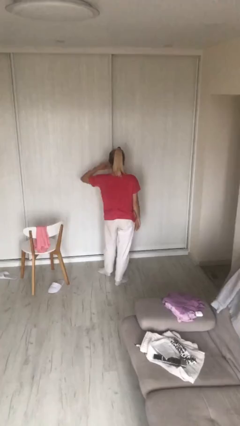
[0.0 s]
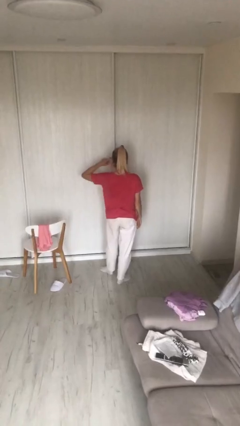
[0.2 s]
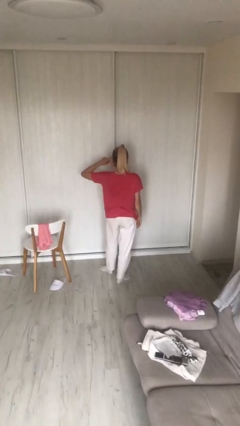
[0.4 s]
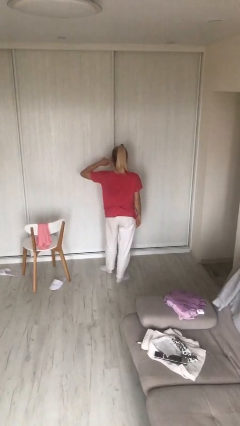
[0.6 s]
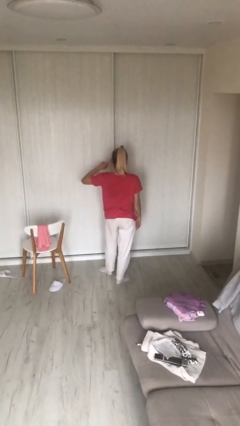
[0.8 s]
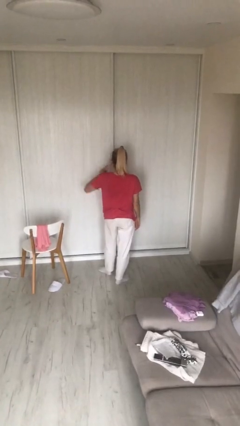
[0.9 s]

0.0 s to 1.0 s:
person gestures listen closely

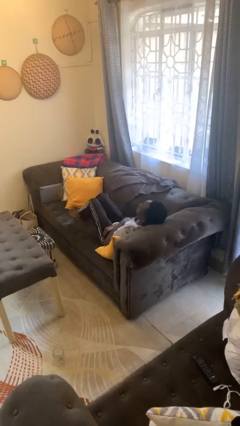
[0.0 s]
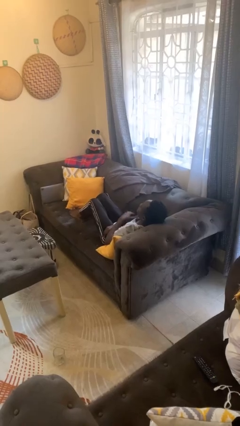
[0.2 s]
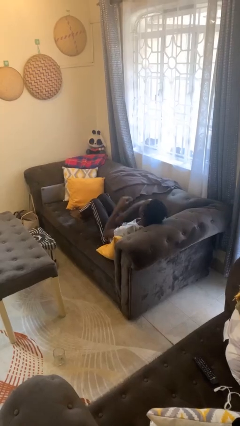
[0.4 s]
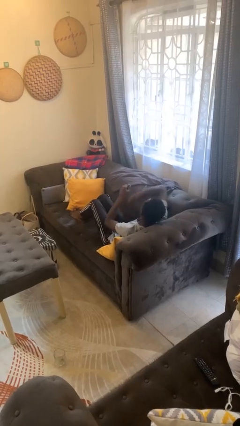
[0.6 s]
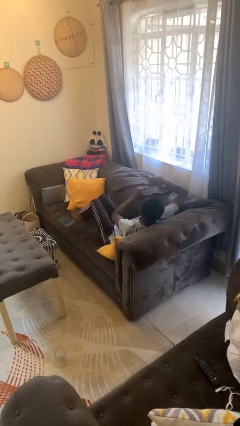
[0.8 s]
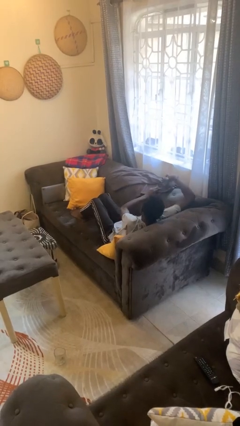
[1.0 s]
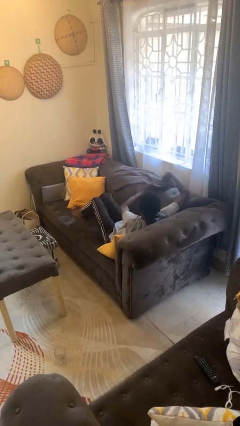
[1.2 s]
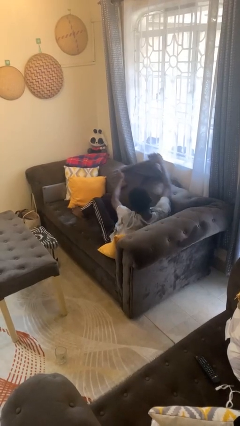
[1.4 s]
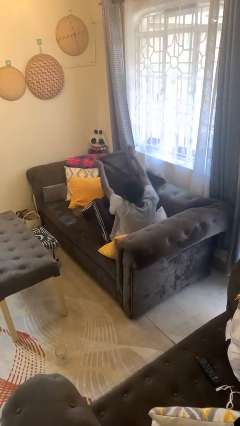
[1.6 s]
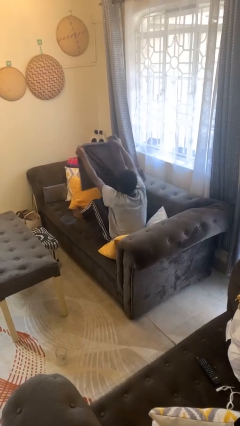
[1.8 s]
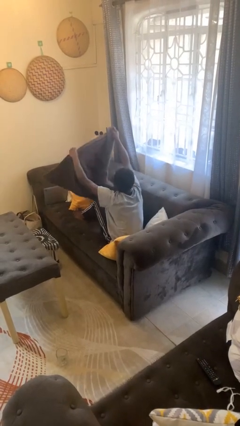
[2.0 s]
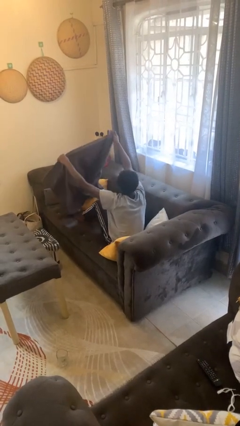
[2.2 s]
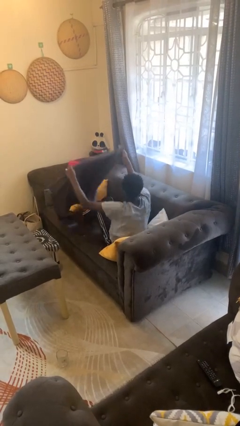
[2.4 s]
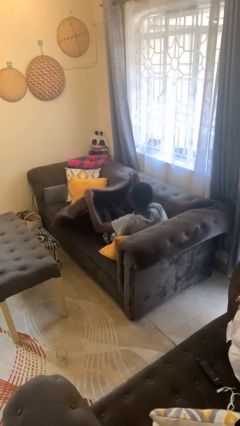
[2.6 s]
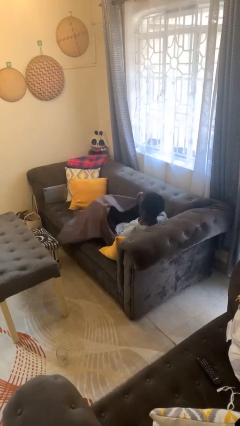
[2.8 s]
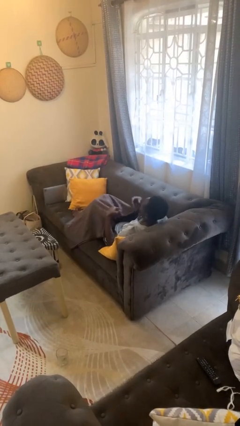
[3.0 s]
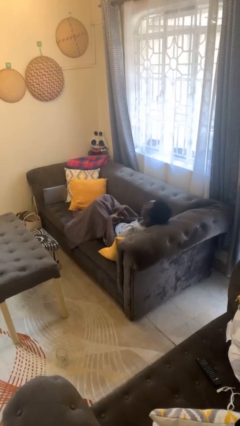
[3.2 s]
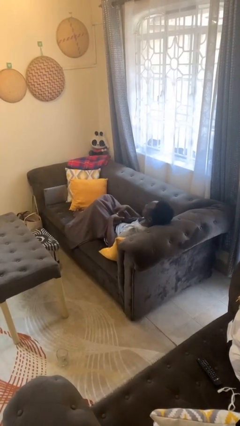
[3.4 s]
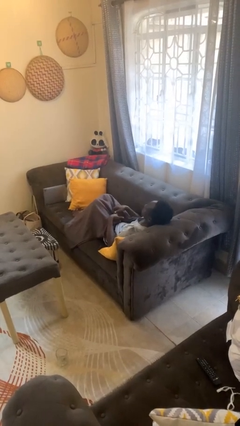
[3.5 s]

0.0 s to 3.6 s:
person covers with blanket

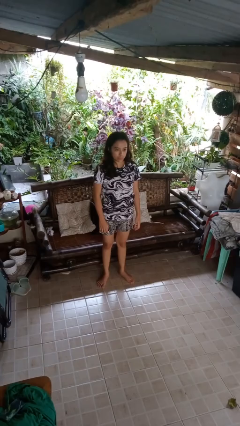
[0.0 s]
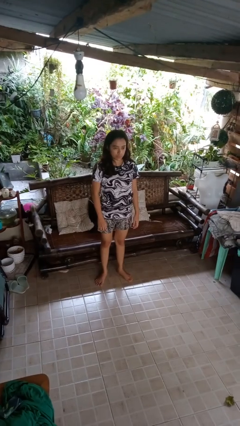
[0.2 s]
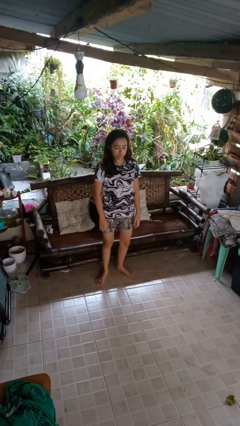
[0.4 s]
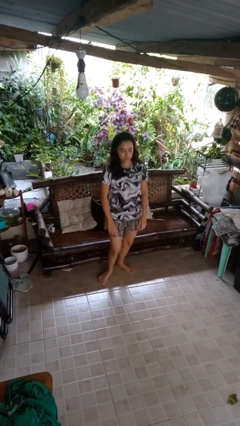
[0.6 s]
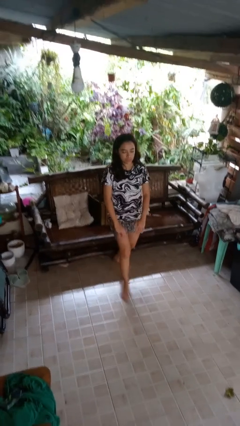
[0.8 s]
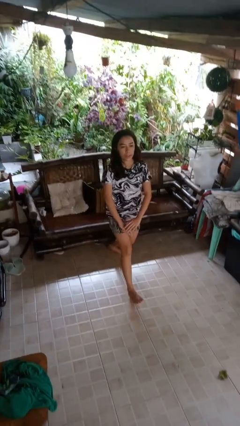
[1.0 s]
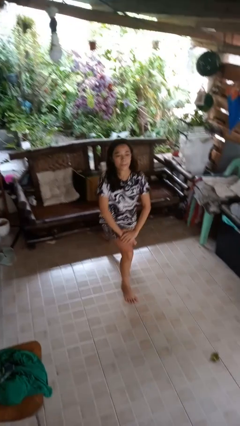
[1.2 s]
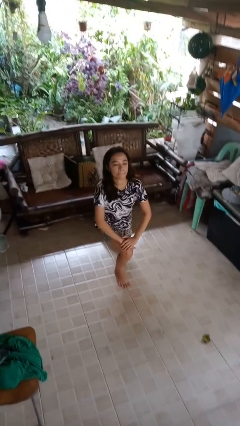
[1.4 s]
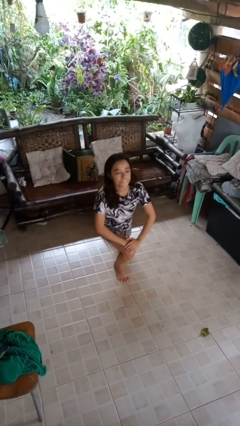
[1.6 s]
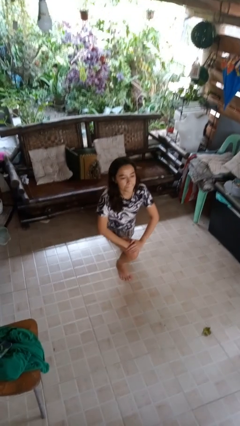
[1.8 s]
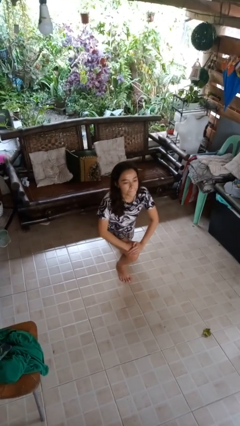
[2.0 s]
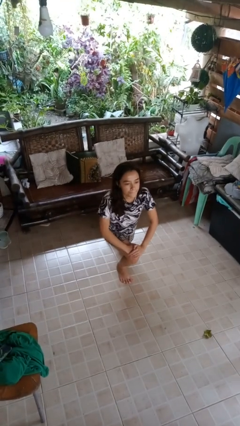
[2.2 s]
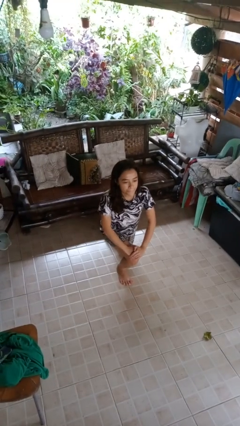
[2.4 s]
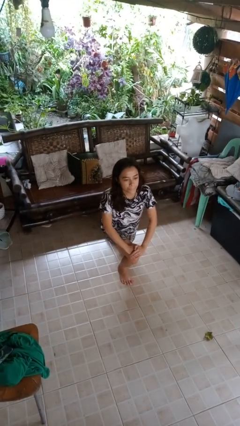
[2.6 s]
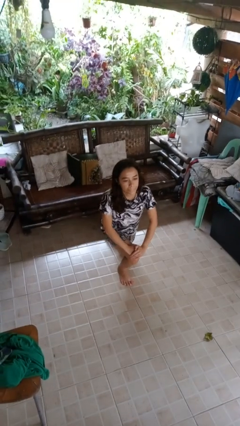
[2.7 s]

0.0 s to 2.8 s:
person exercises with lunges

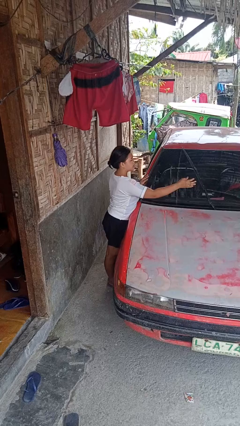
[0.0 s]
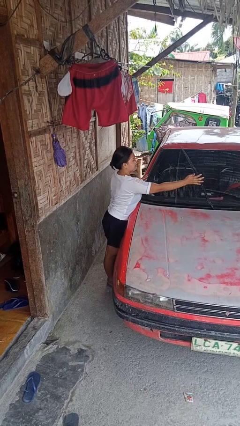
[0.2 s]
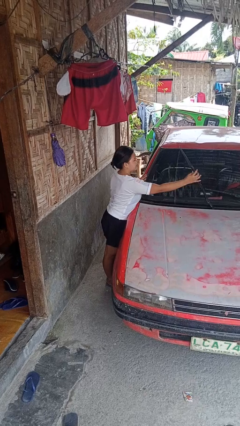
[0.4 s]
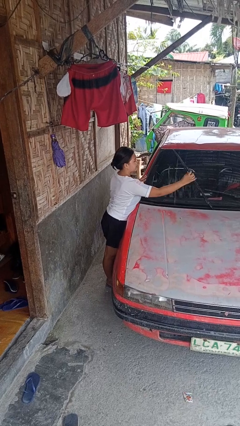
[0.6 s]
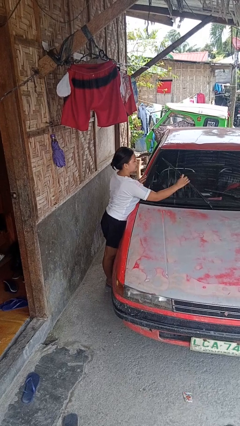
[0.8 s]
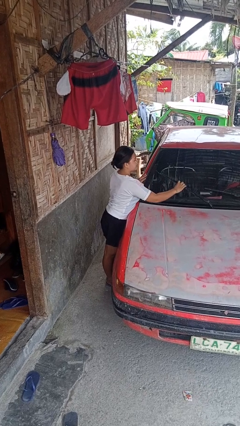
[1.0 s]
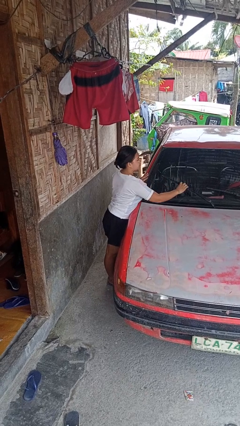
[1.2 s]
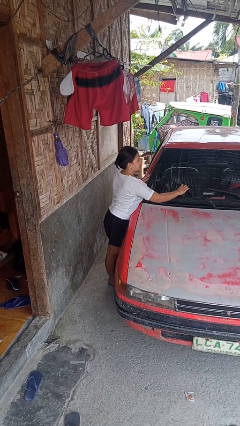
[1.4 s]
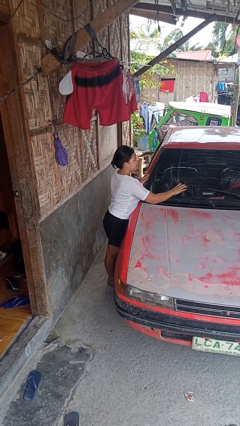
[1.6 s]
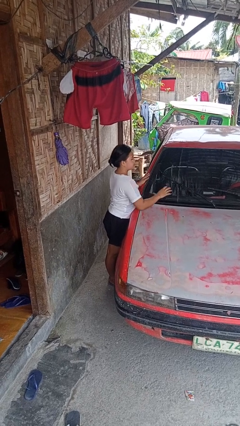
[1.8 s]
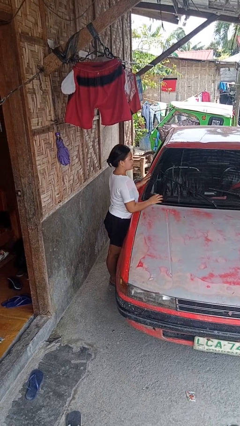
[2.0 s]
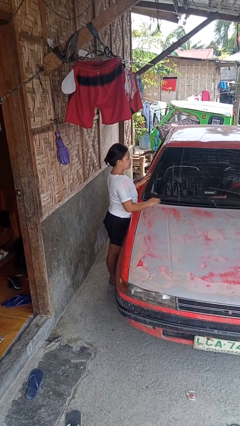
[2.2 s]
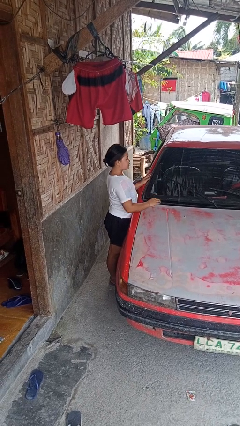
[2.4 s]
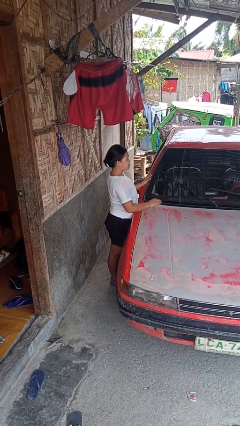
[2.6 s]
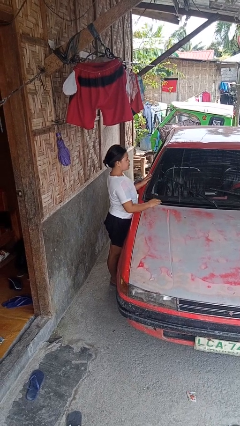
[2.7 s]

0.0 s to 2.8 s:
person flips down car wipers

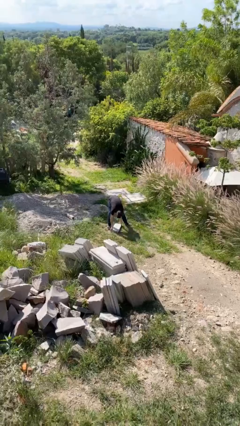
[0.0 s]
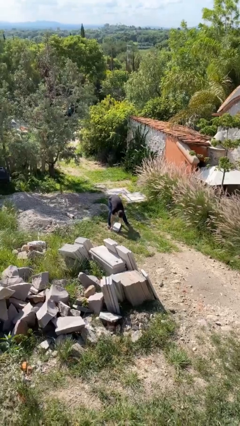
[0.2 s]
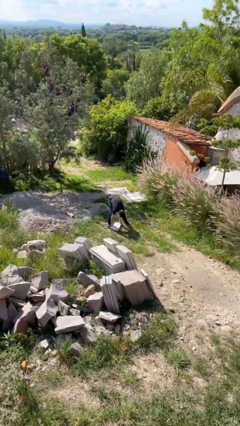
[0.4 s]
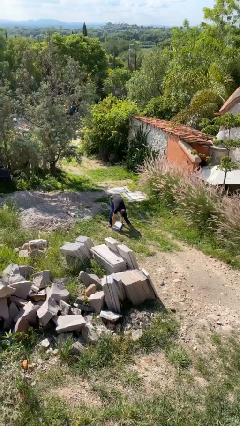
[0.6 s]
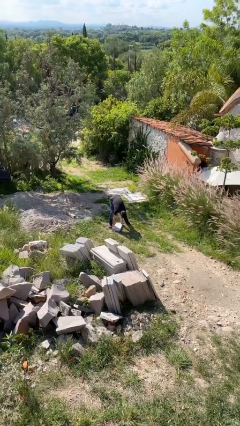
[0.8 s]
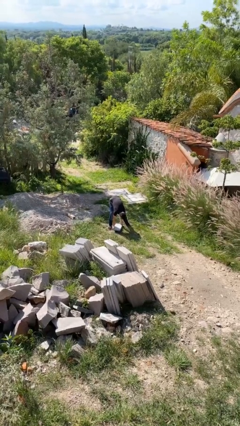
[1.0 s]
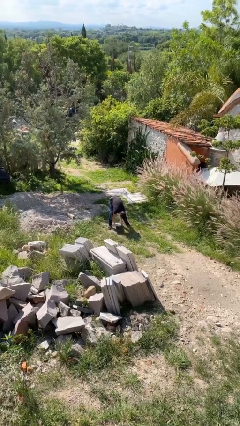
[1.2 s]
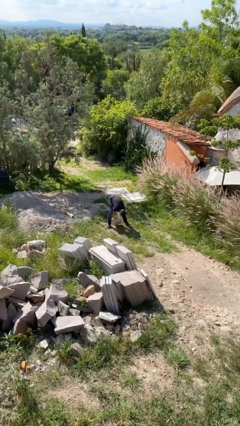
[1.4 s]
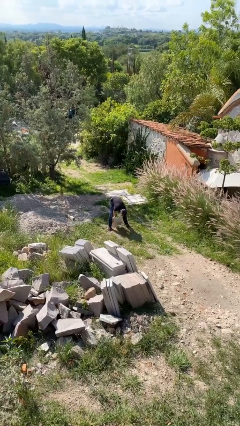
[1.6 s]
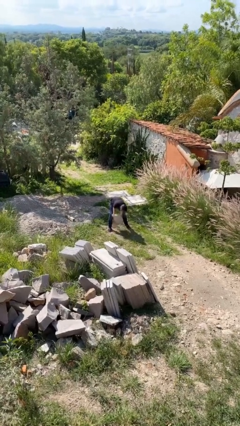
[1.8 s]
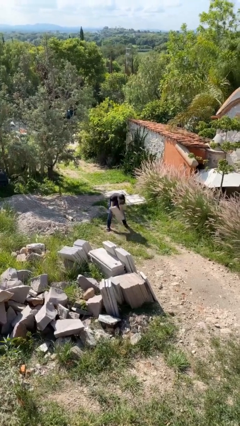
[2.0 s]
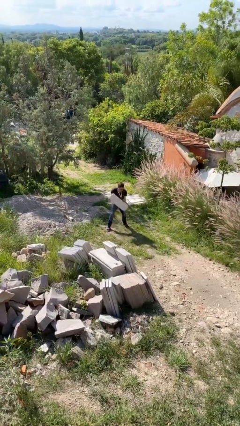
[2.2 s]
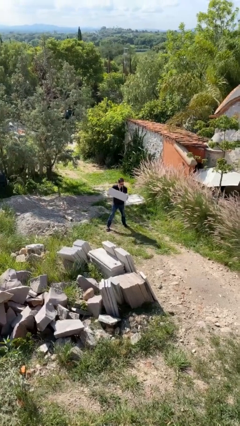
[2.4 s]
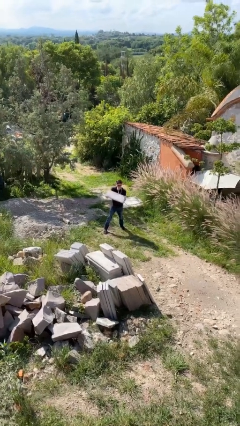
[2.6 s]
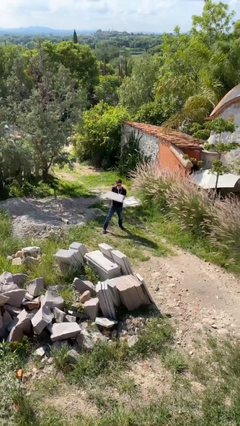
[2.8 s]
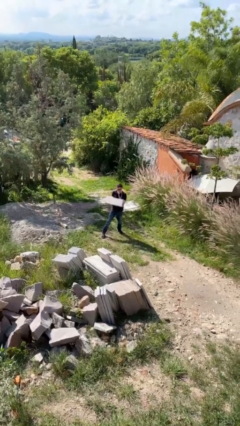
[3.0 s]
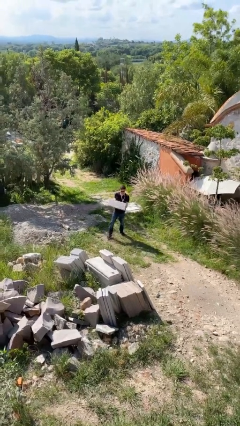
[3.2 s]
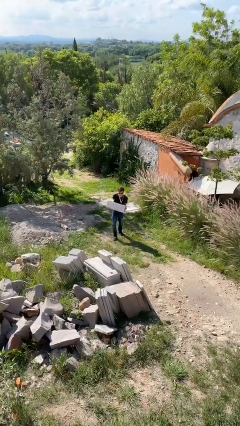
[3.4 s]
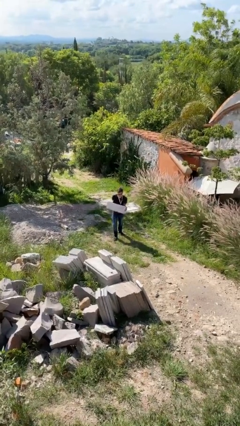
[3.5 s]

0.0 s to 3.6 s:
person picks up object from floor

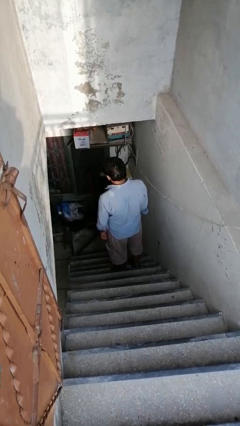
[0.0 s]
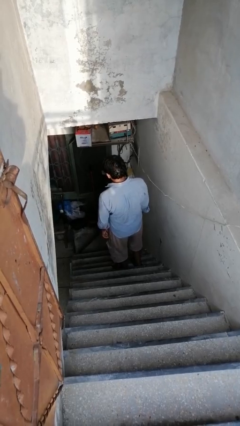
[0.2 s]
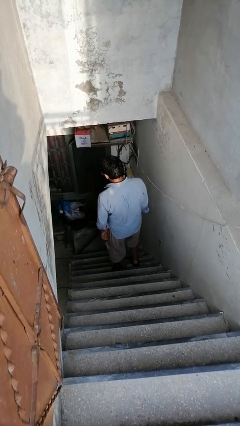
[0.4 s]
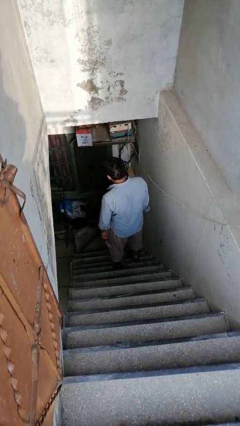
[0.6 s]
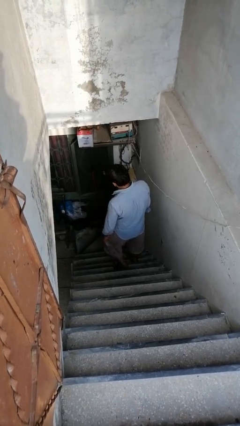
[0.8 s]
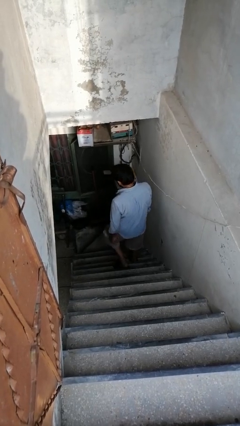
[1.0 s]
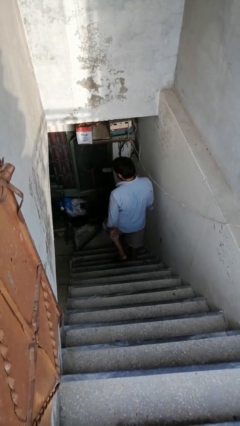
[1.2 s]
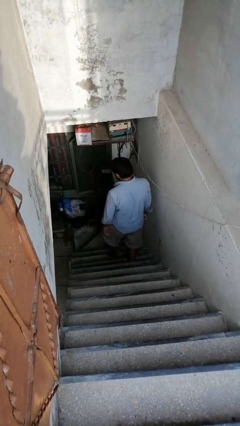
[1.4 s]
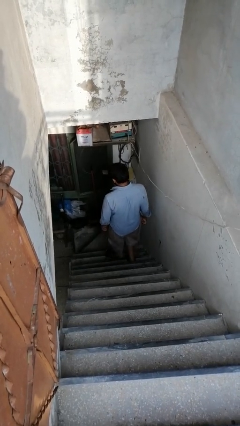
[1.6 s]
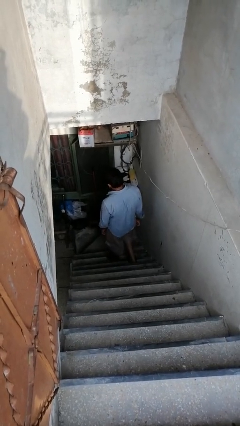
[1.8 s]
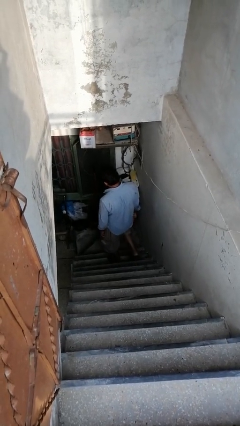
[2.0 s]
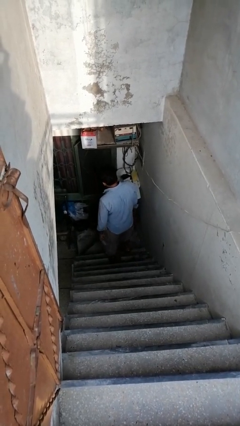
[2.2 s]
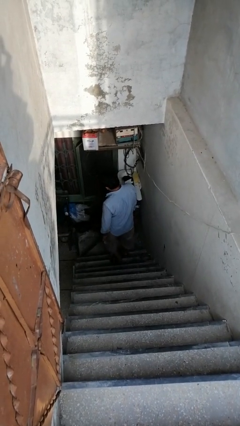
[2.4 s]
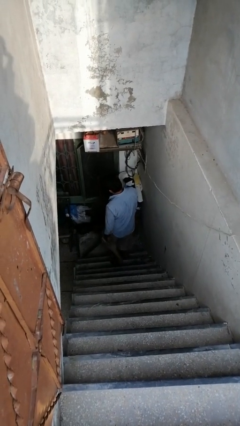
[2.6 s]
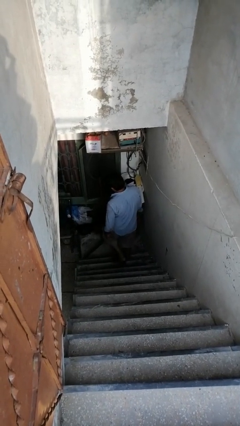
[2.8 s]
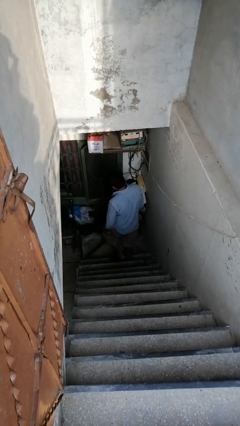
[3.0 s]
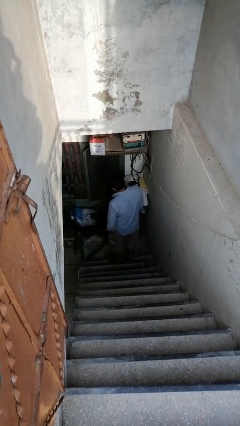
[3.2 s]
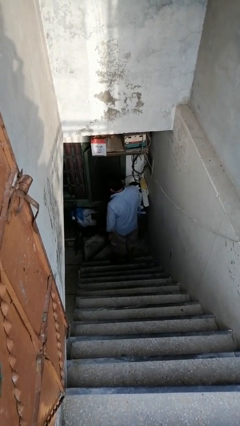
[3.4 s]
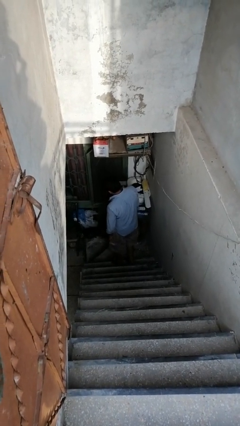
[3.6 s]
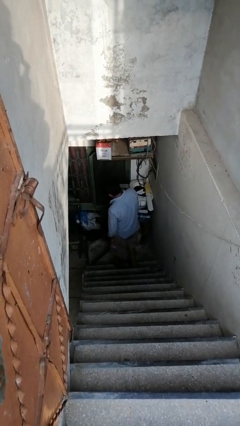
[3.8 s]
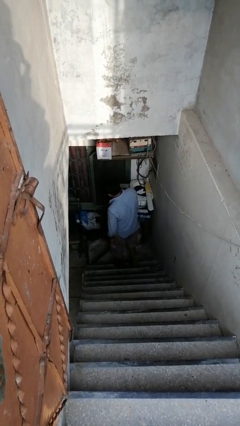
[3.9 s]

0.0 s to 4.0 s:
person climbs down stairs
